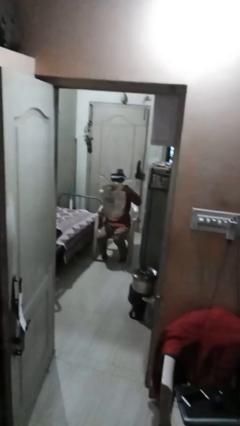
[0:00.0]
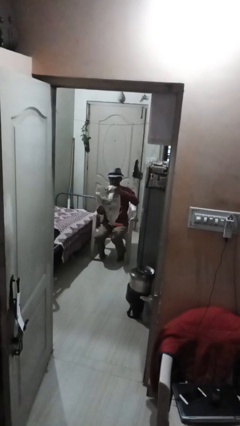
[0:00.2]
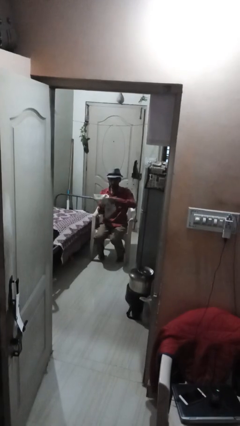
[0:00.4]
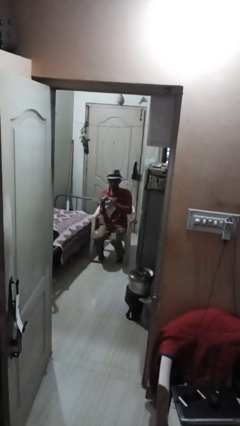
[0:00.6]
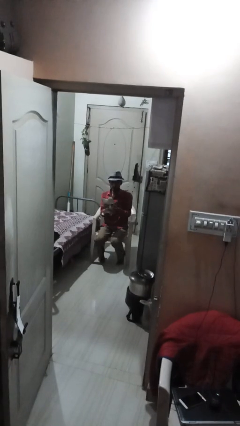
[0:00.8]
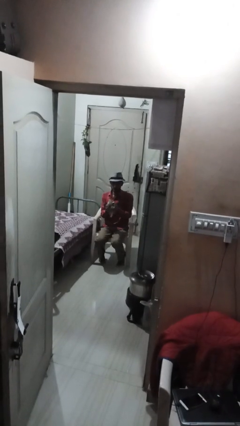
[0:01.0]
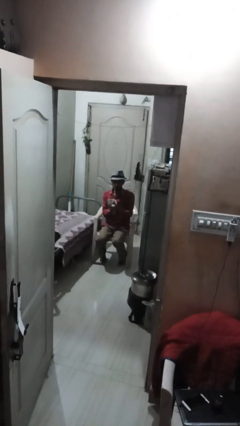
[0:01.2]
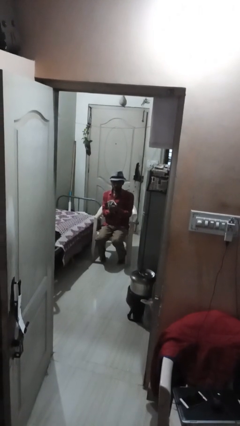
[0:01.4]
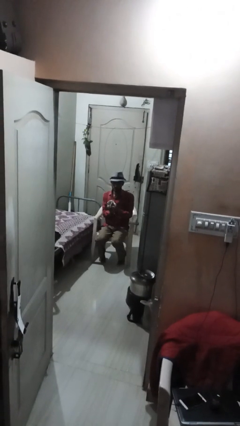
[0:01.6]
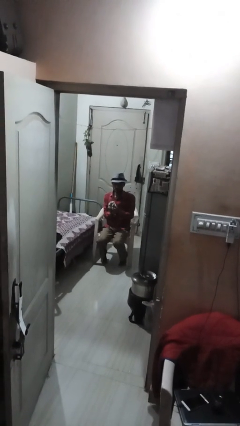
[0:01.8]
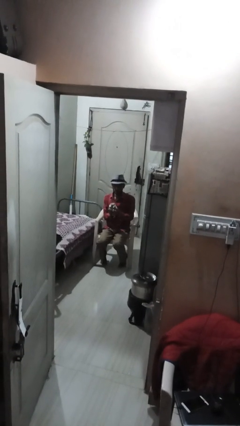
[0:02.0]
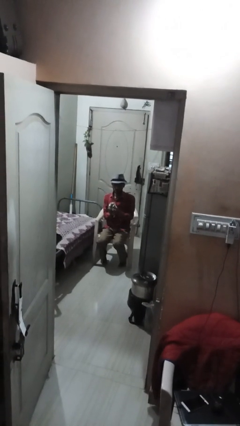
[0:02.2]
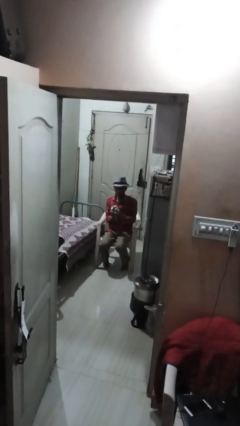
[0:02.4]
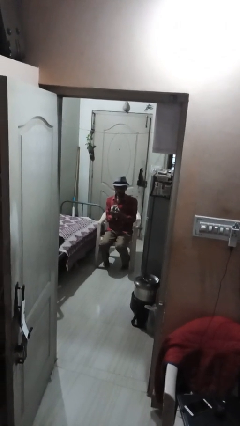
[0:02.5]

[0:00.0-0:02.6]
person crumples paper

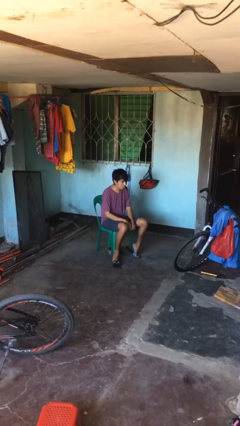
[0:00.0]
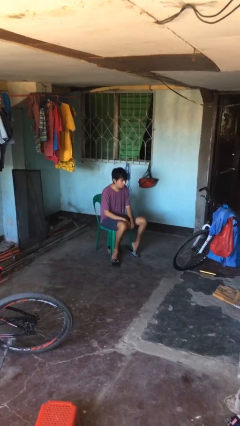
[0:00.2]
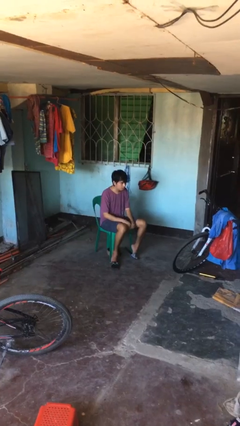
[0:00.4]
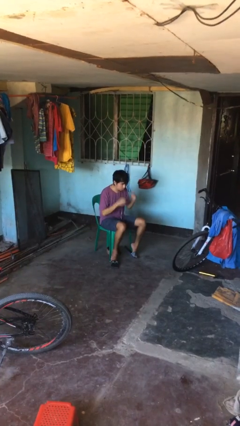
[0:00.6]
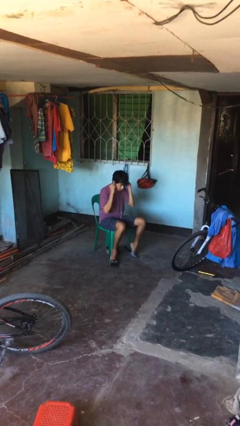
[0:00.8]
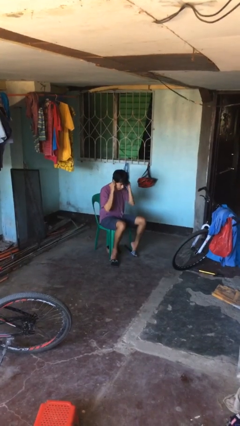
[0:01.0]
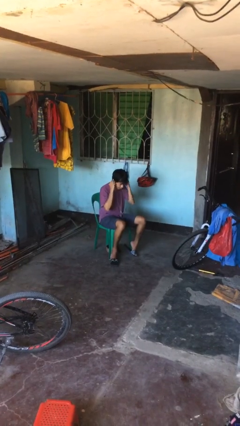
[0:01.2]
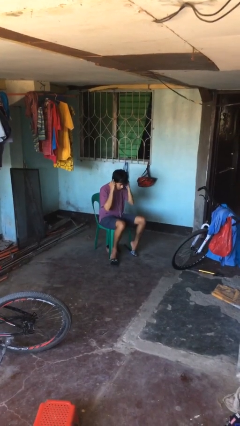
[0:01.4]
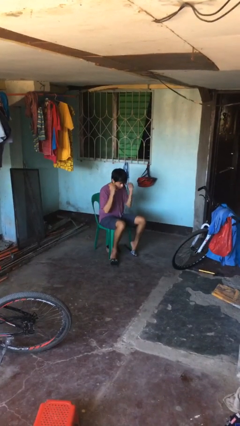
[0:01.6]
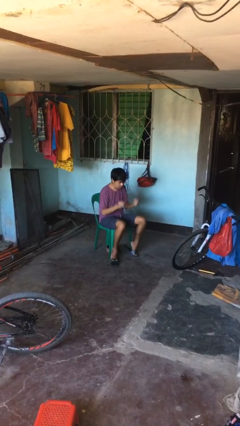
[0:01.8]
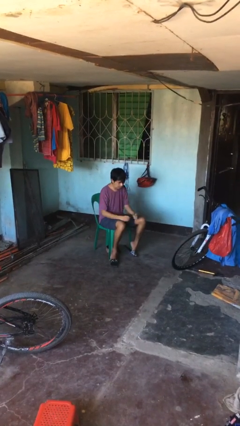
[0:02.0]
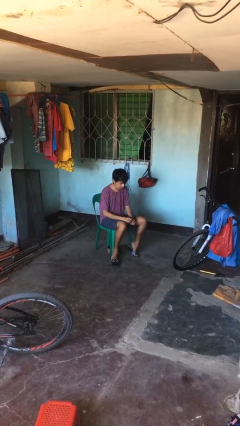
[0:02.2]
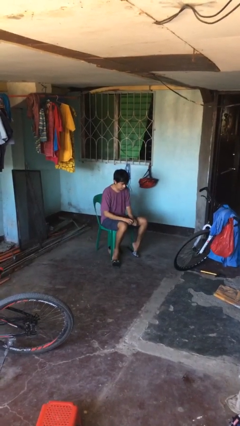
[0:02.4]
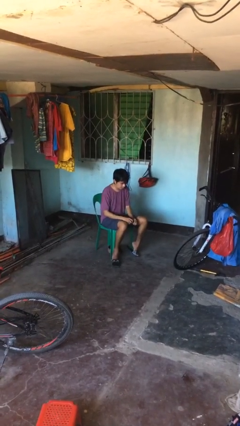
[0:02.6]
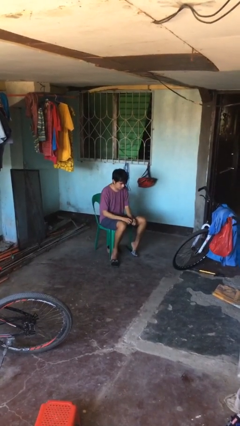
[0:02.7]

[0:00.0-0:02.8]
person takes off headphones

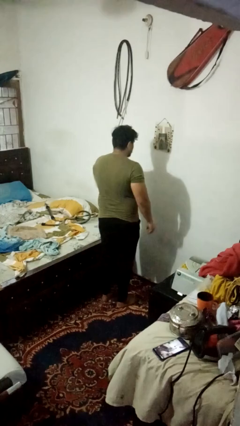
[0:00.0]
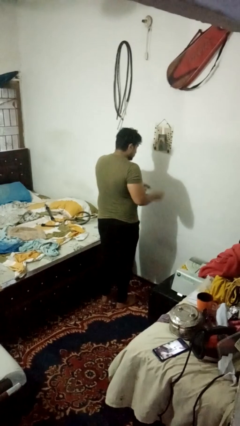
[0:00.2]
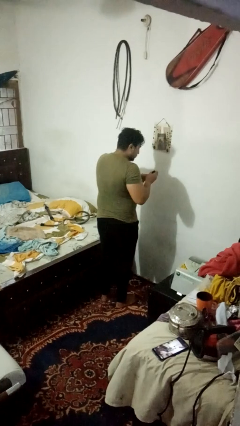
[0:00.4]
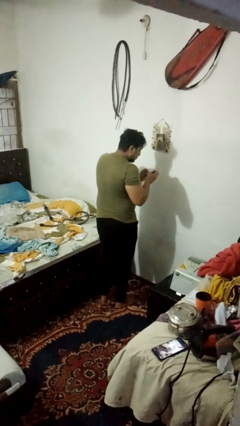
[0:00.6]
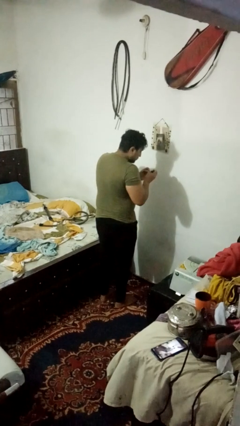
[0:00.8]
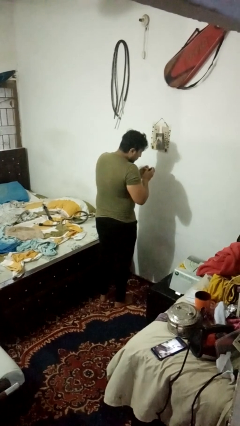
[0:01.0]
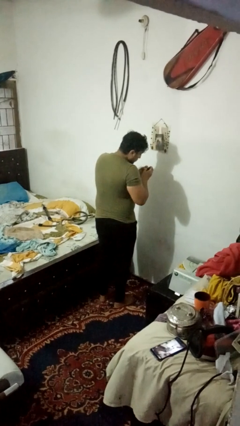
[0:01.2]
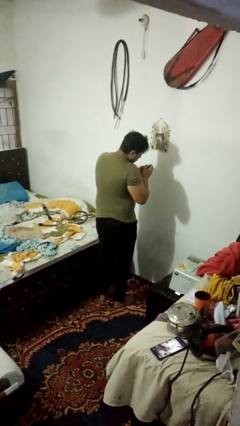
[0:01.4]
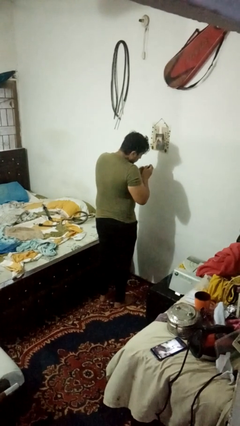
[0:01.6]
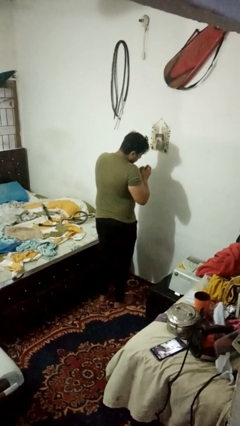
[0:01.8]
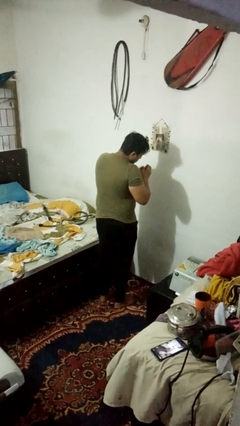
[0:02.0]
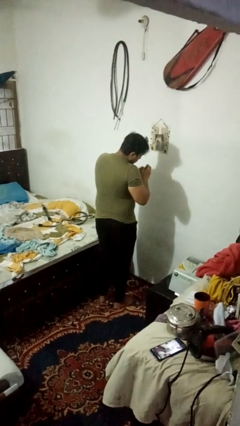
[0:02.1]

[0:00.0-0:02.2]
person paints fingernails

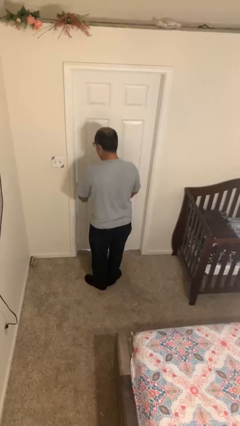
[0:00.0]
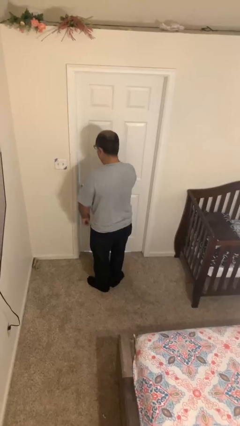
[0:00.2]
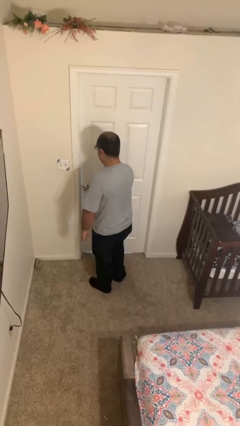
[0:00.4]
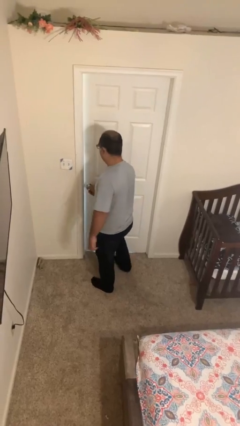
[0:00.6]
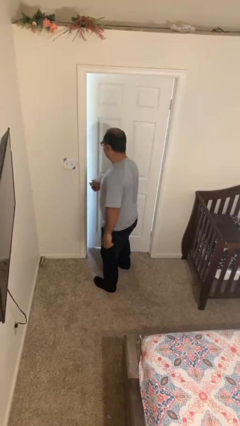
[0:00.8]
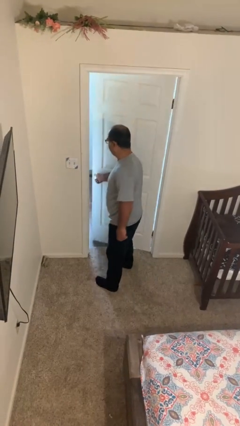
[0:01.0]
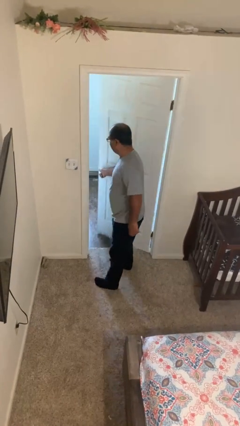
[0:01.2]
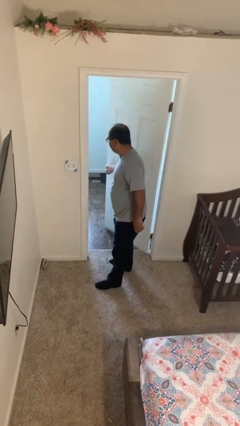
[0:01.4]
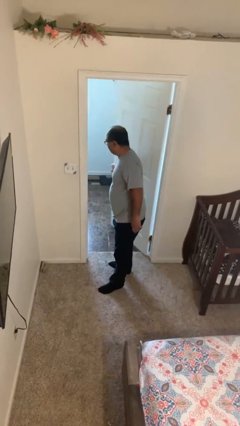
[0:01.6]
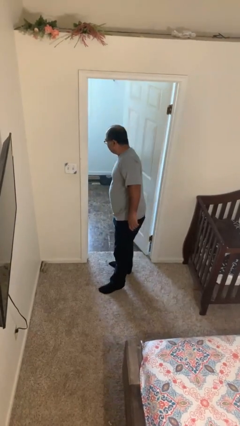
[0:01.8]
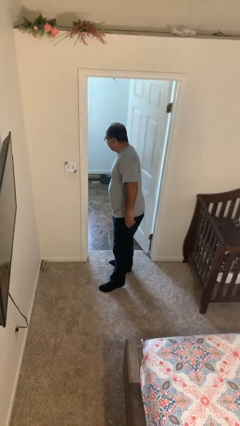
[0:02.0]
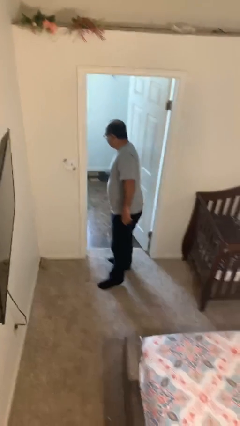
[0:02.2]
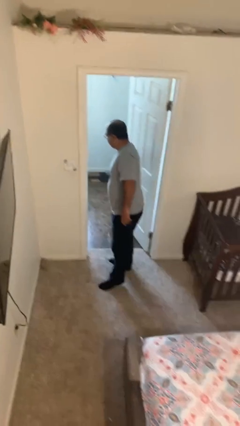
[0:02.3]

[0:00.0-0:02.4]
person opens facility door

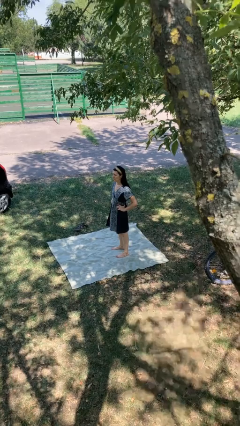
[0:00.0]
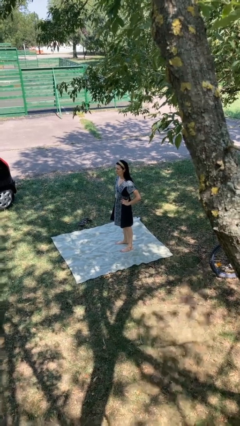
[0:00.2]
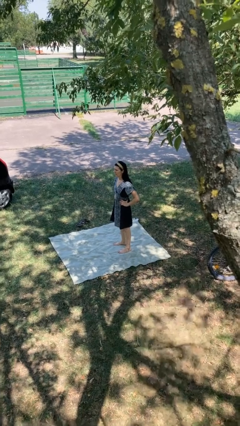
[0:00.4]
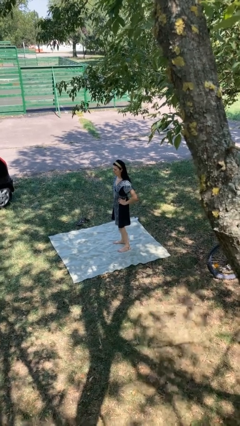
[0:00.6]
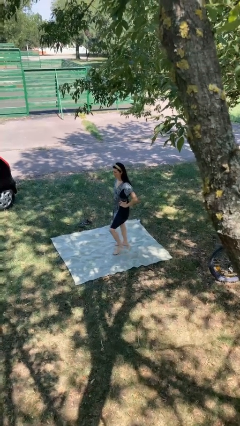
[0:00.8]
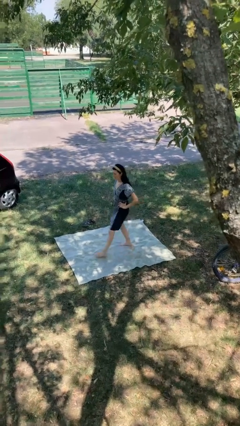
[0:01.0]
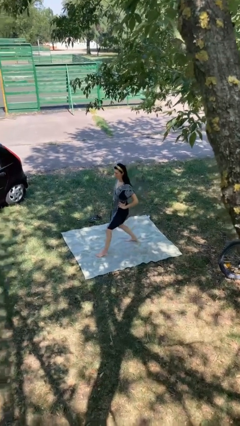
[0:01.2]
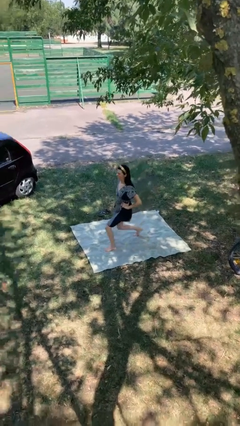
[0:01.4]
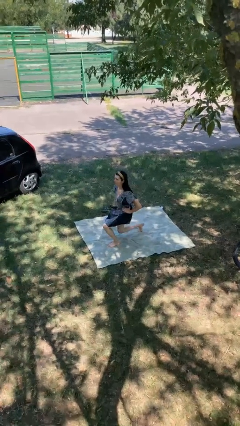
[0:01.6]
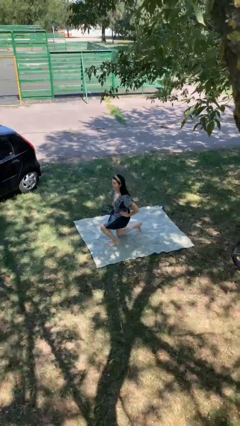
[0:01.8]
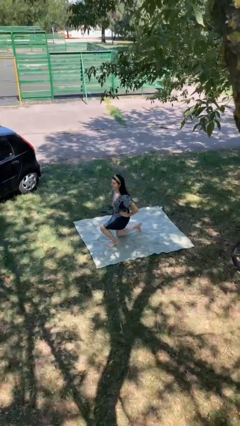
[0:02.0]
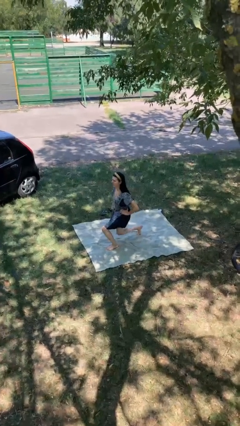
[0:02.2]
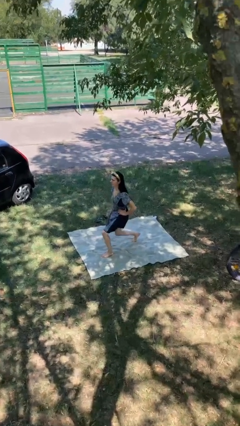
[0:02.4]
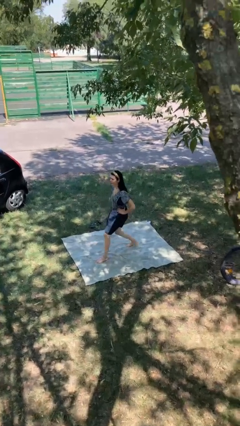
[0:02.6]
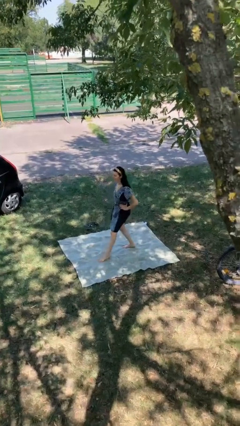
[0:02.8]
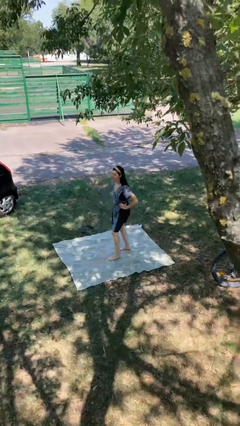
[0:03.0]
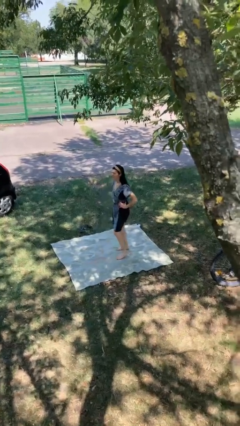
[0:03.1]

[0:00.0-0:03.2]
person exercises with lunges

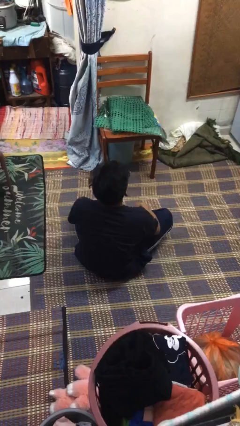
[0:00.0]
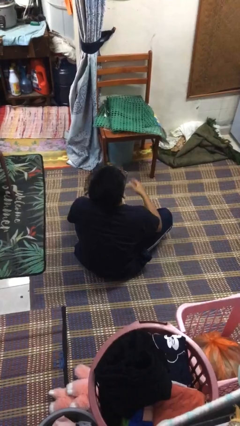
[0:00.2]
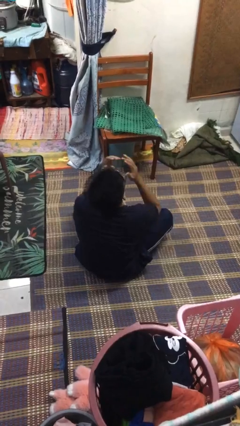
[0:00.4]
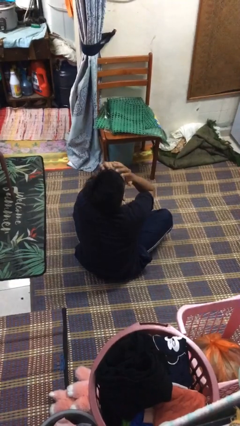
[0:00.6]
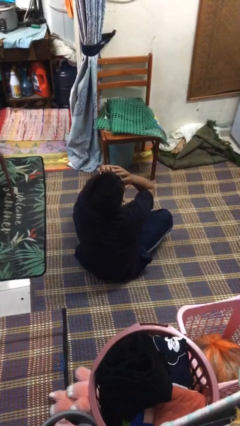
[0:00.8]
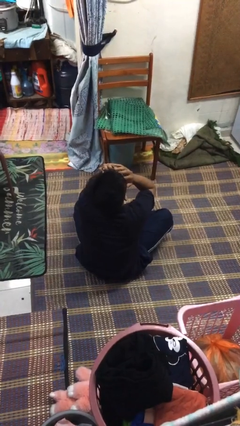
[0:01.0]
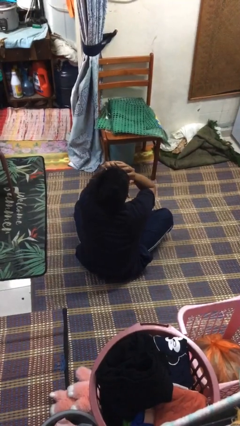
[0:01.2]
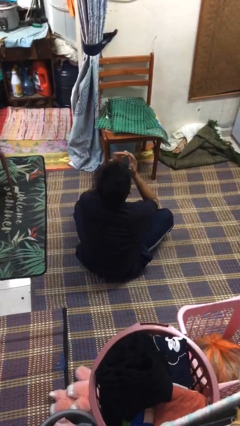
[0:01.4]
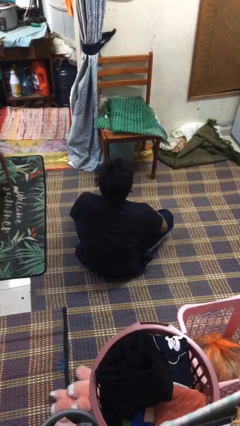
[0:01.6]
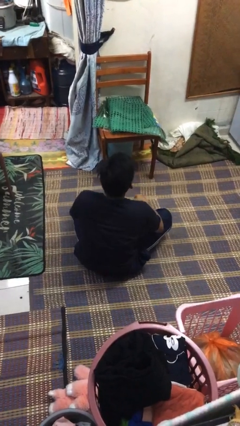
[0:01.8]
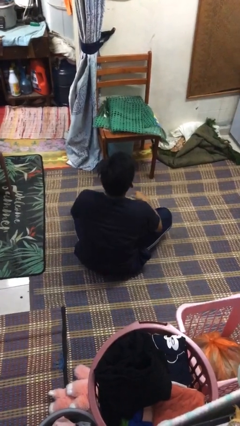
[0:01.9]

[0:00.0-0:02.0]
person covers face with hands

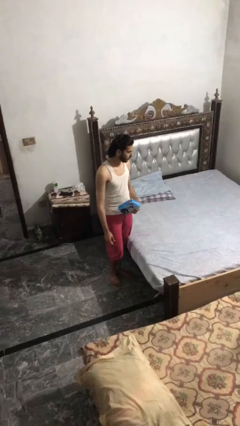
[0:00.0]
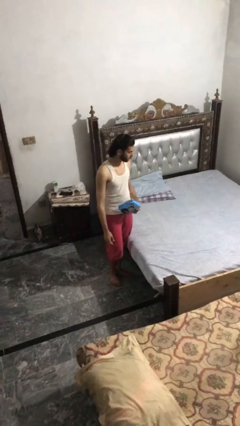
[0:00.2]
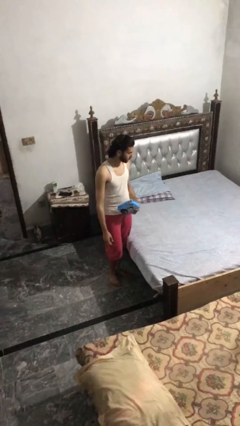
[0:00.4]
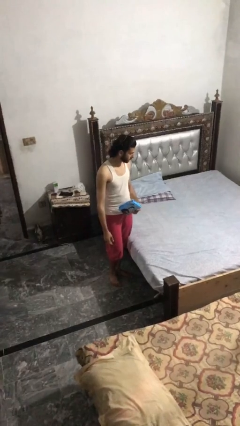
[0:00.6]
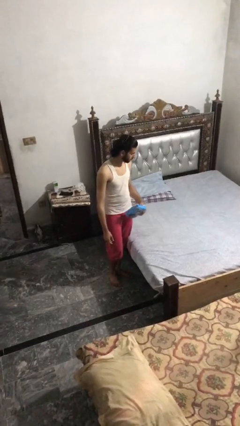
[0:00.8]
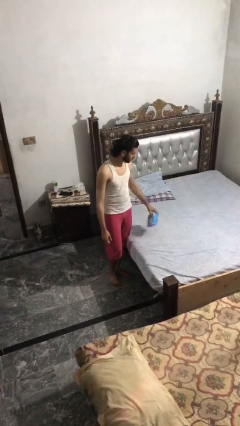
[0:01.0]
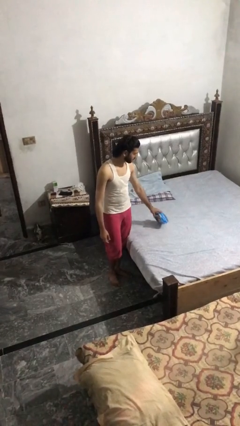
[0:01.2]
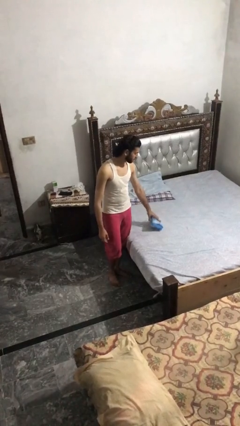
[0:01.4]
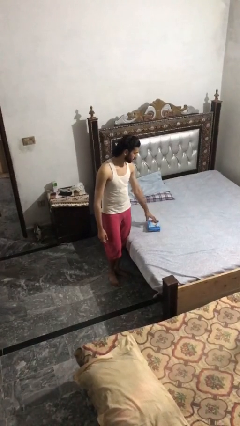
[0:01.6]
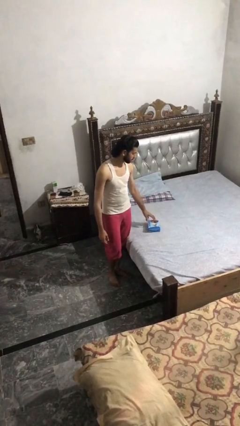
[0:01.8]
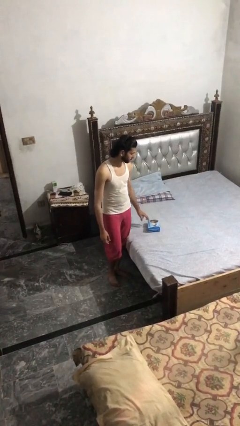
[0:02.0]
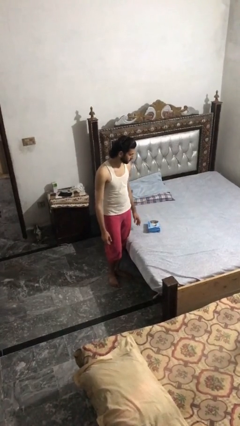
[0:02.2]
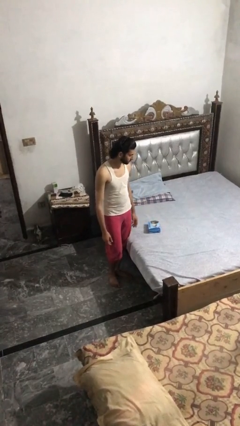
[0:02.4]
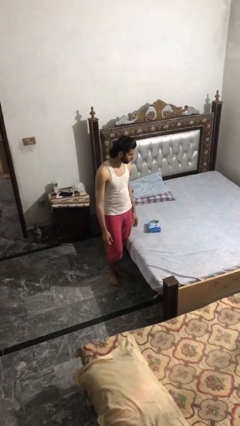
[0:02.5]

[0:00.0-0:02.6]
person puts down object on bed
